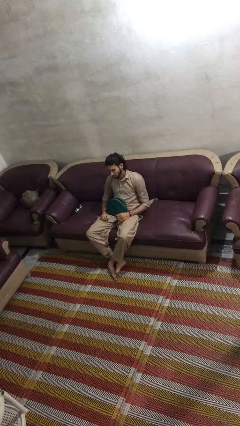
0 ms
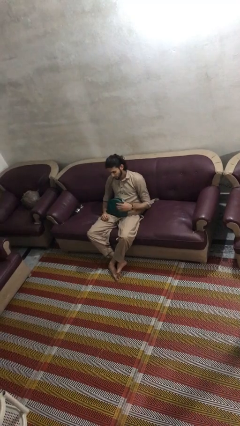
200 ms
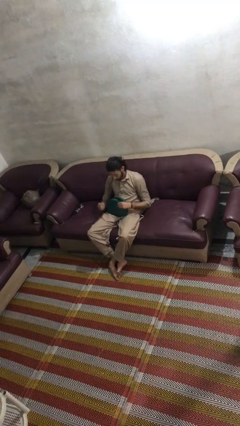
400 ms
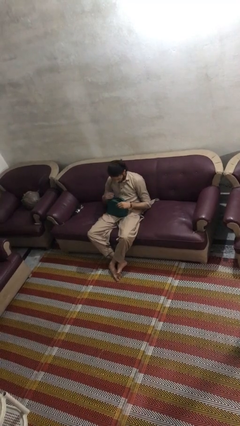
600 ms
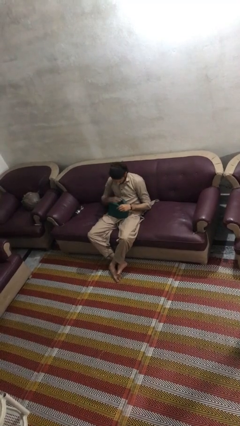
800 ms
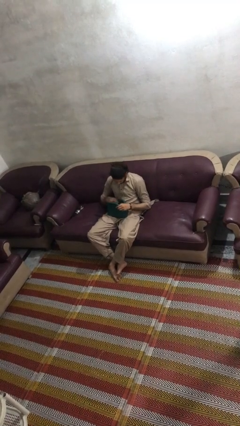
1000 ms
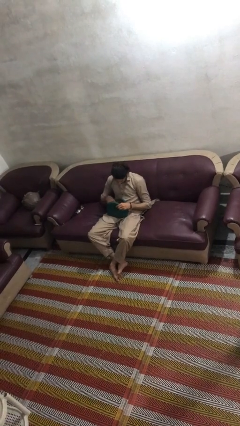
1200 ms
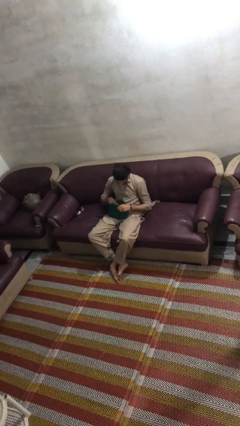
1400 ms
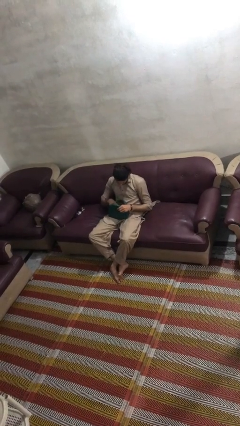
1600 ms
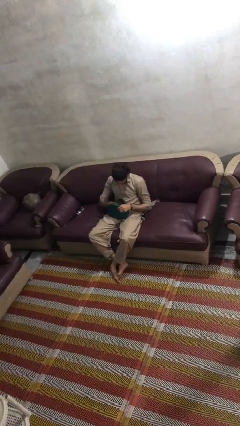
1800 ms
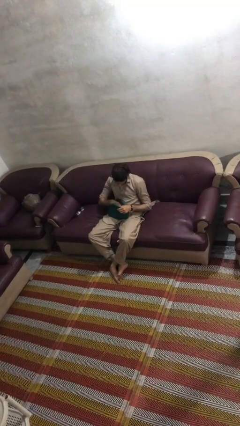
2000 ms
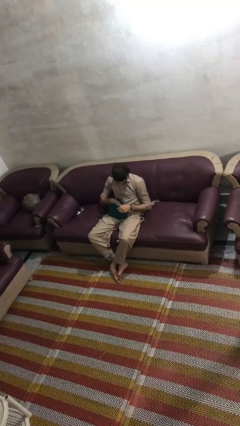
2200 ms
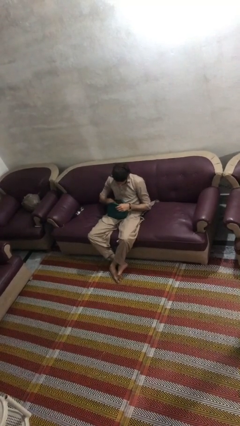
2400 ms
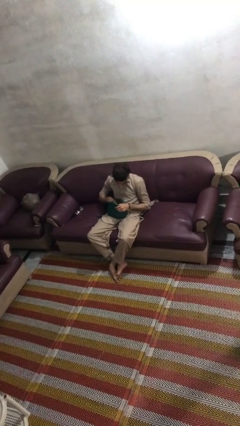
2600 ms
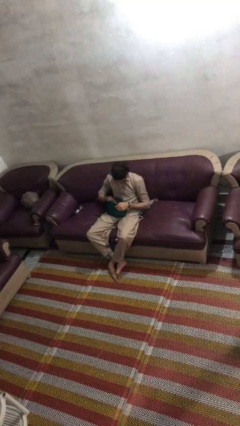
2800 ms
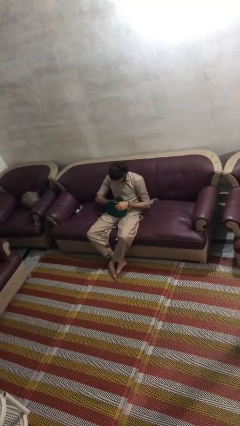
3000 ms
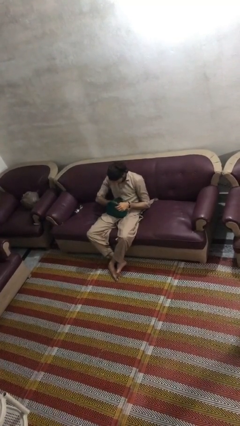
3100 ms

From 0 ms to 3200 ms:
person searches in purse

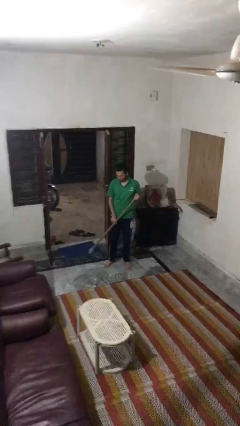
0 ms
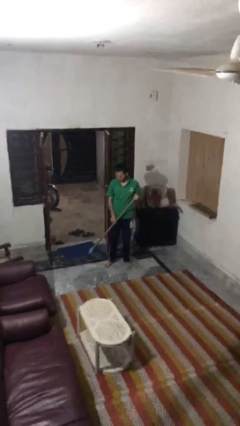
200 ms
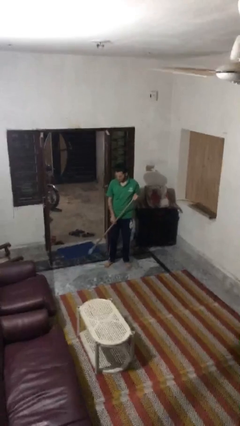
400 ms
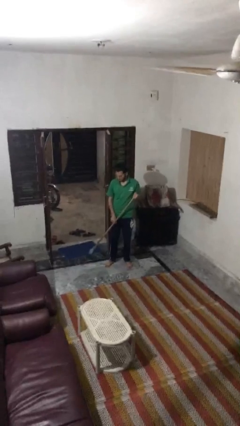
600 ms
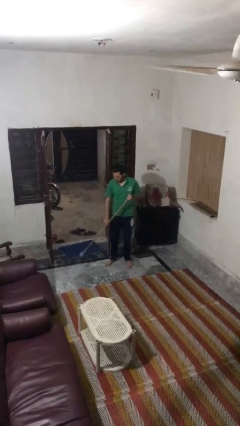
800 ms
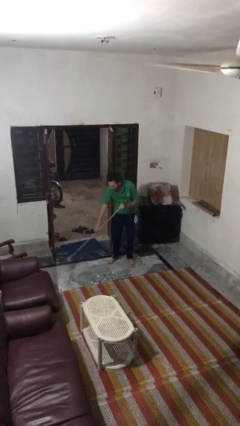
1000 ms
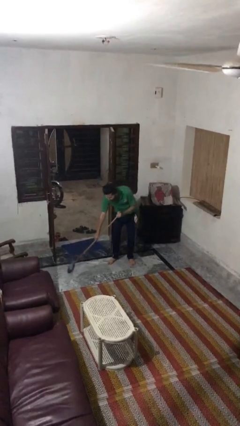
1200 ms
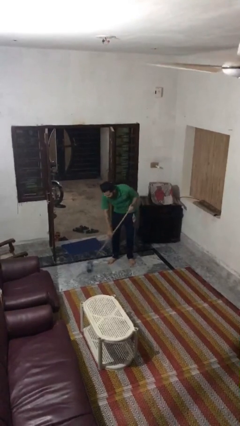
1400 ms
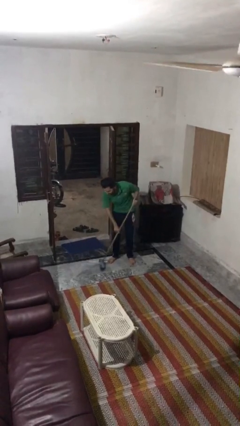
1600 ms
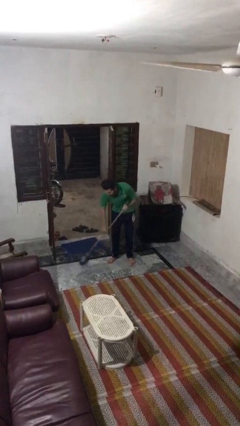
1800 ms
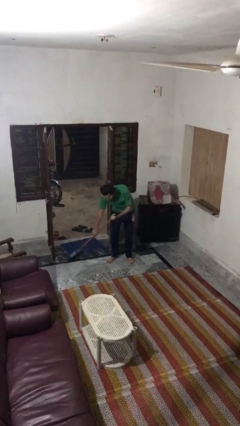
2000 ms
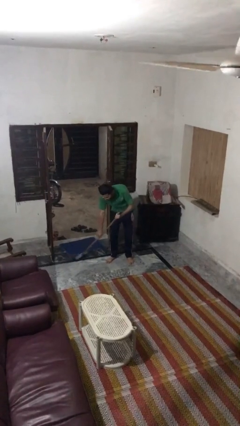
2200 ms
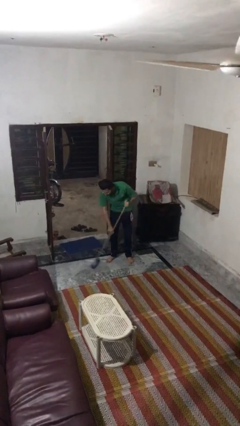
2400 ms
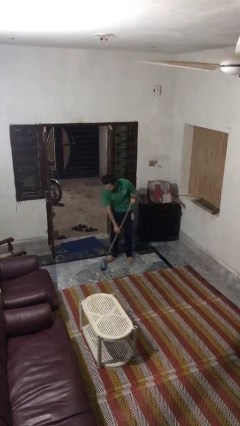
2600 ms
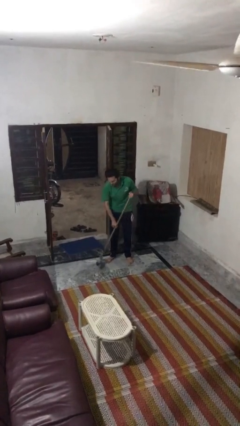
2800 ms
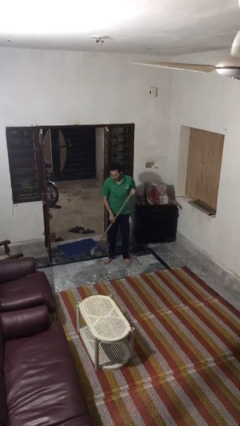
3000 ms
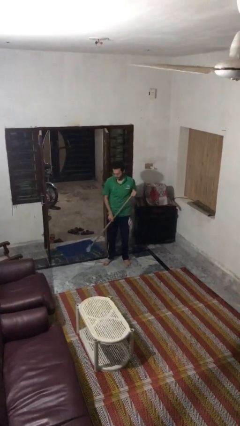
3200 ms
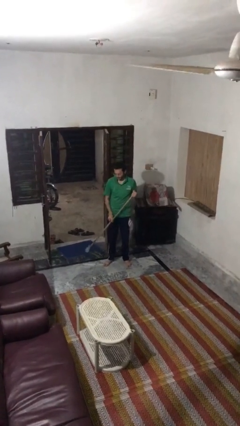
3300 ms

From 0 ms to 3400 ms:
person sweeps floor

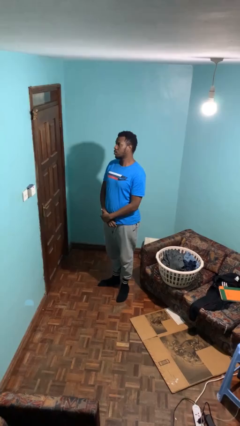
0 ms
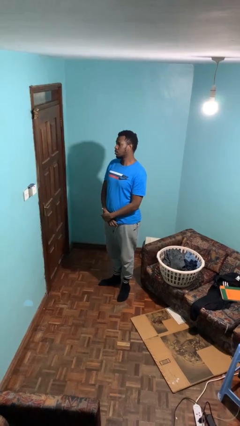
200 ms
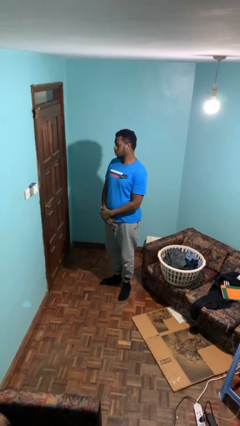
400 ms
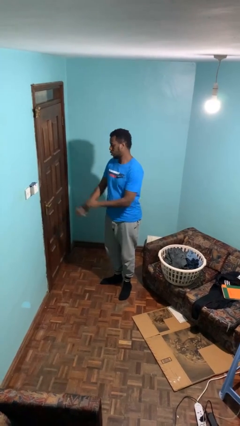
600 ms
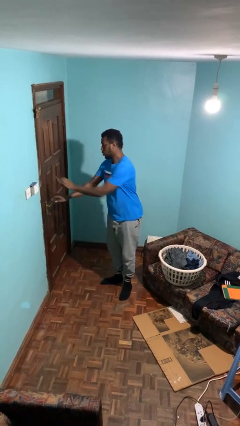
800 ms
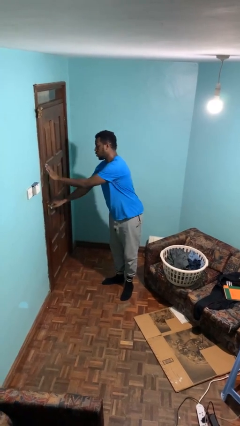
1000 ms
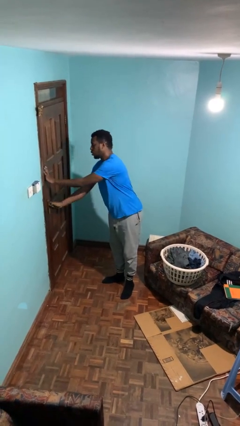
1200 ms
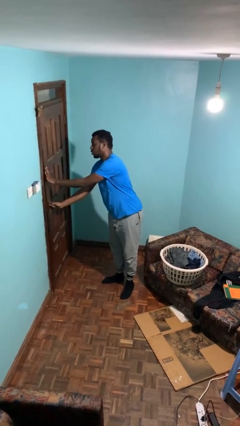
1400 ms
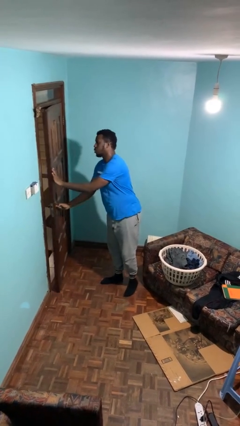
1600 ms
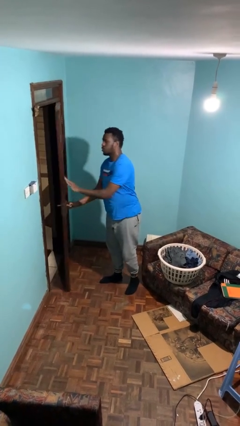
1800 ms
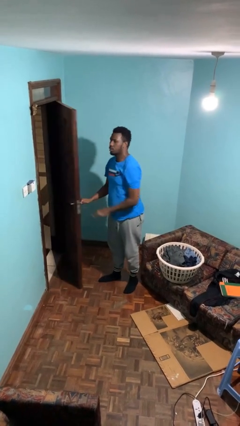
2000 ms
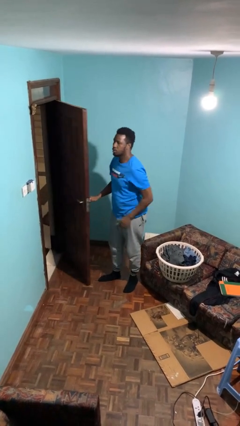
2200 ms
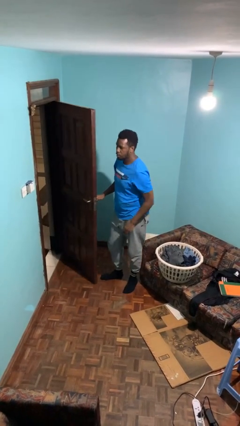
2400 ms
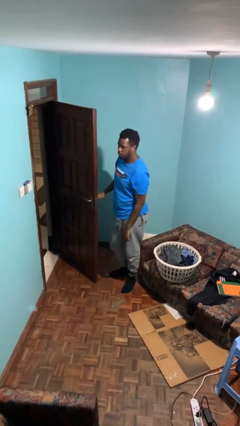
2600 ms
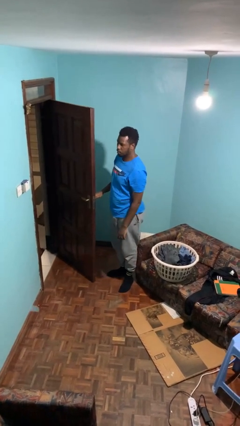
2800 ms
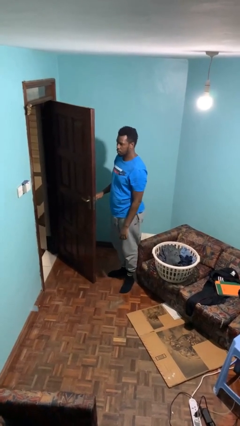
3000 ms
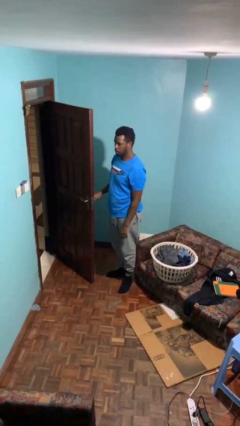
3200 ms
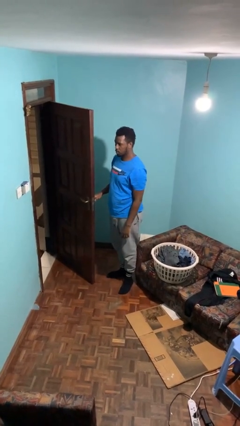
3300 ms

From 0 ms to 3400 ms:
person opens facility door

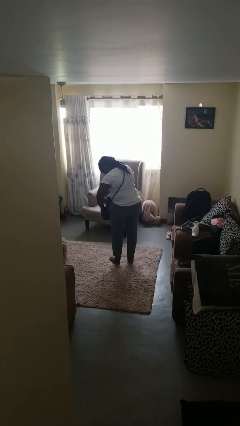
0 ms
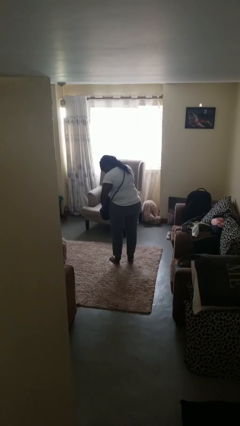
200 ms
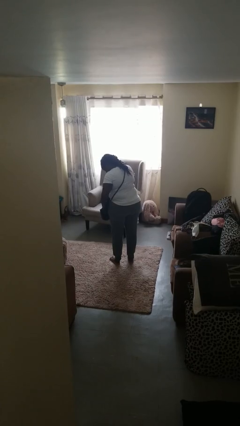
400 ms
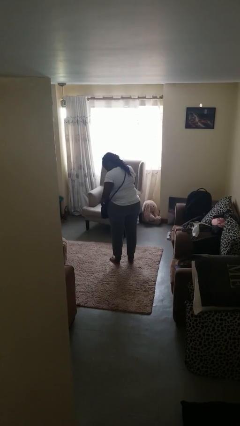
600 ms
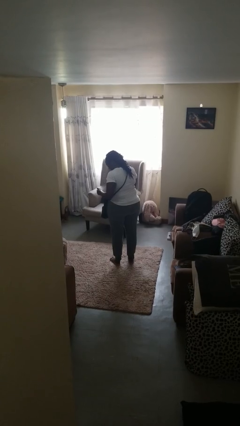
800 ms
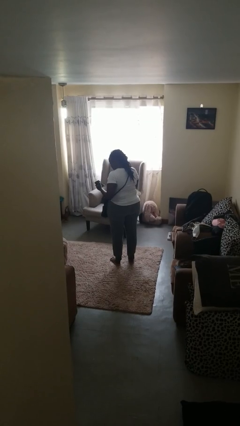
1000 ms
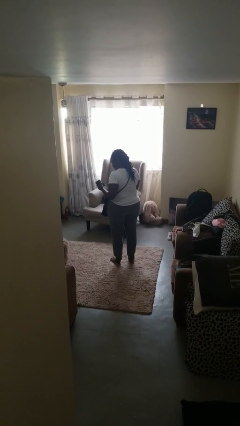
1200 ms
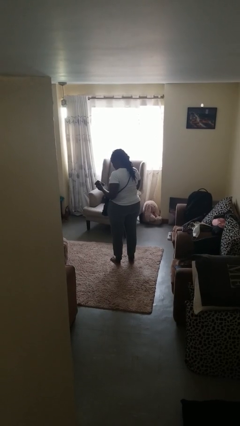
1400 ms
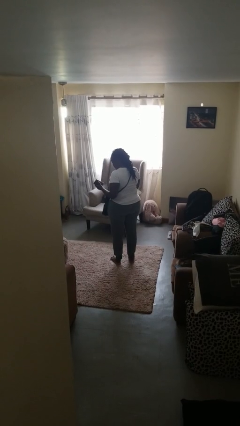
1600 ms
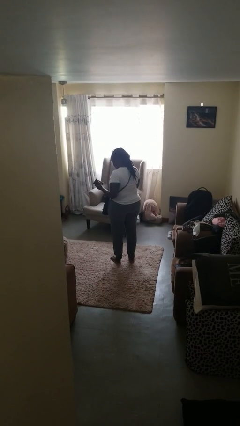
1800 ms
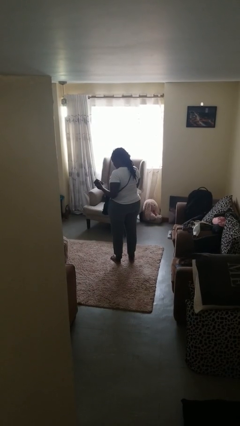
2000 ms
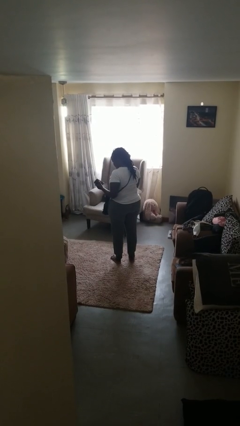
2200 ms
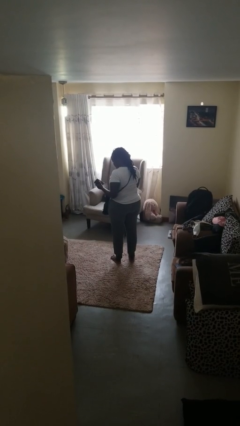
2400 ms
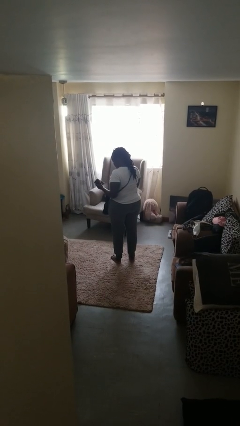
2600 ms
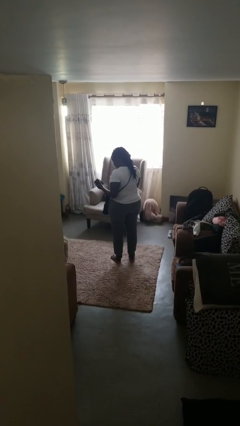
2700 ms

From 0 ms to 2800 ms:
person takes object from purse

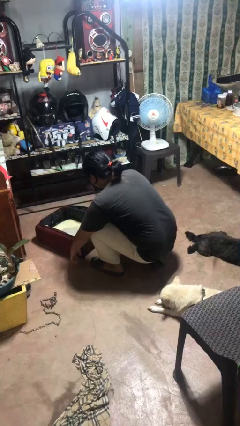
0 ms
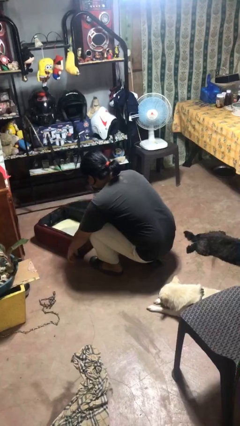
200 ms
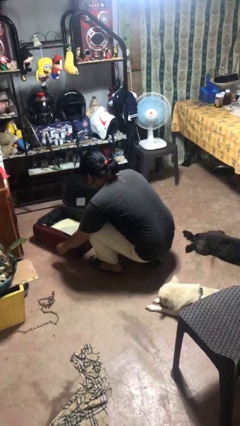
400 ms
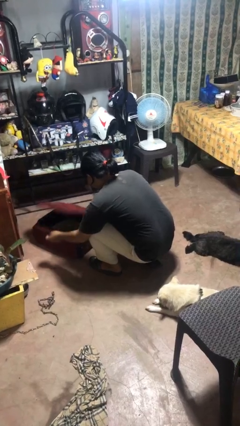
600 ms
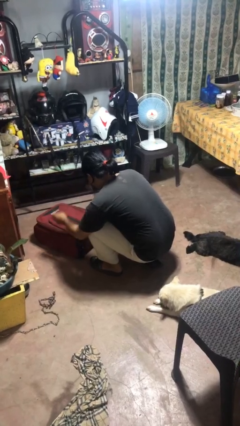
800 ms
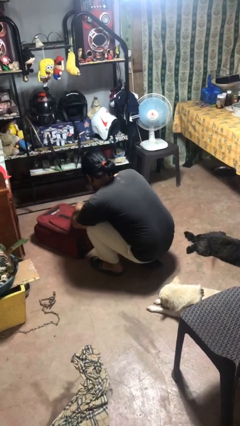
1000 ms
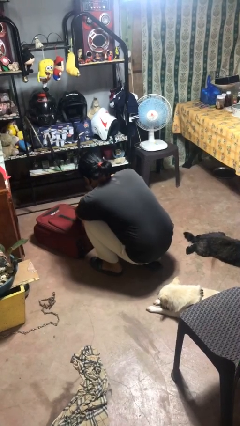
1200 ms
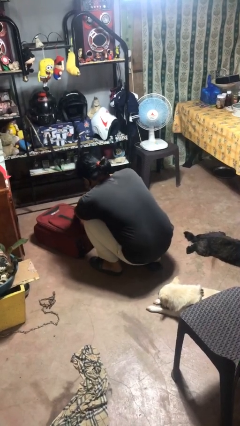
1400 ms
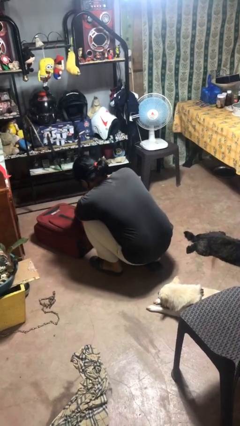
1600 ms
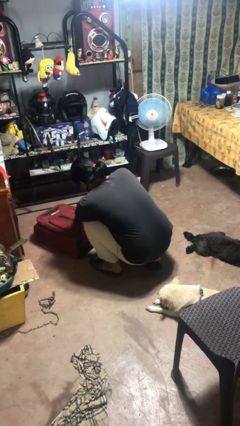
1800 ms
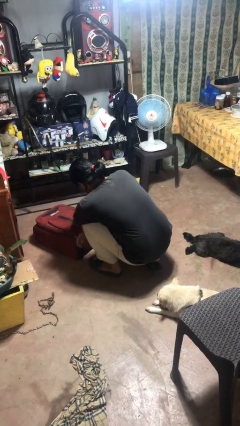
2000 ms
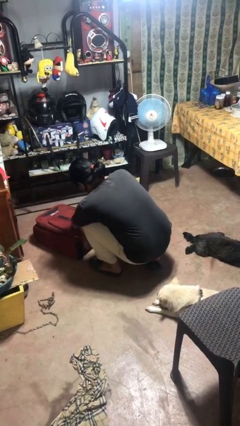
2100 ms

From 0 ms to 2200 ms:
person closes suitcase

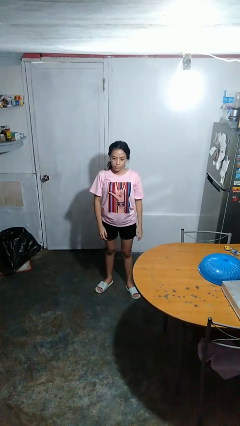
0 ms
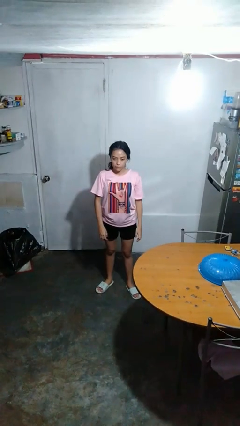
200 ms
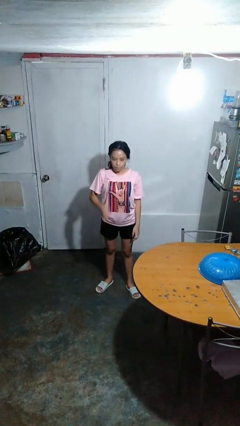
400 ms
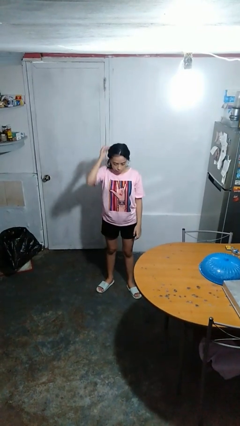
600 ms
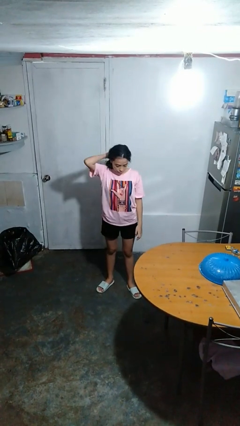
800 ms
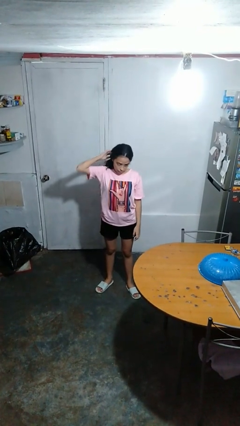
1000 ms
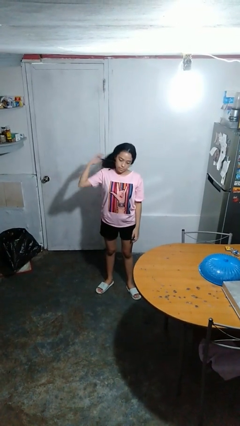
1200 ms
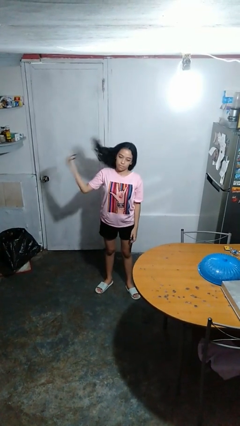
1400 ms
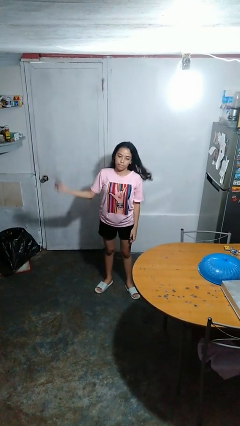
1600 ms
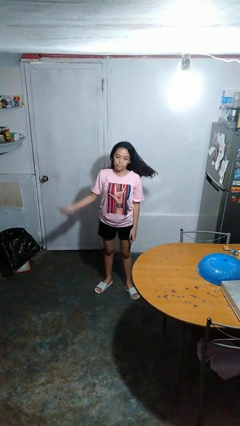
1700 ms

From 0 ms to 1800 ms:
person takes off hairtie

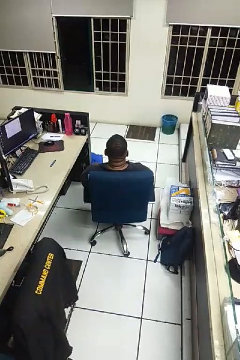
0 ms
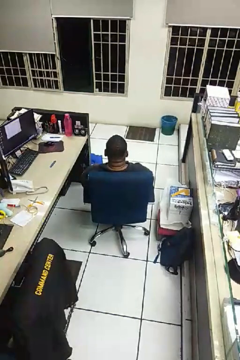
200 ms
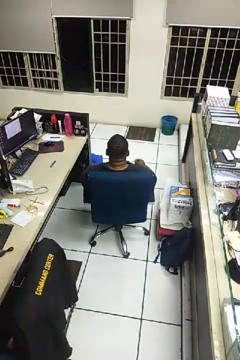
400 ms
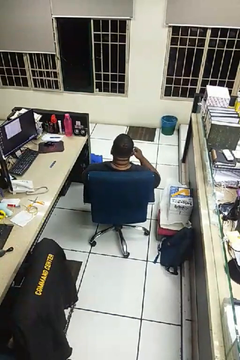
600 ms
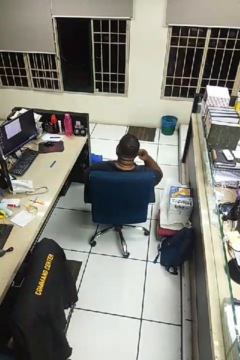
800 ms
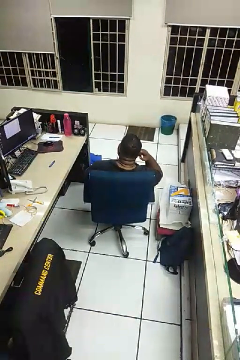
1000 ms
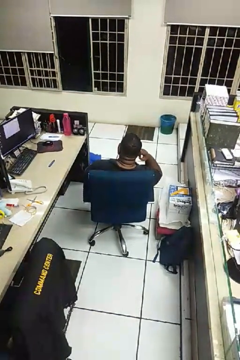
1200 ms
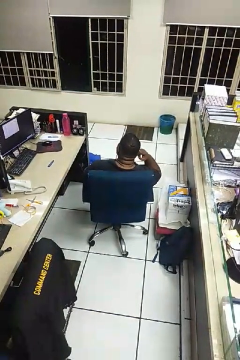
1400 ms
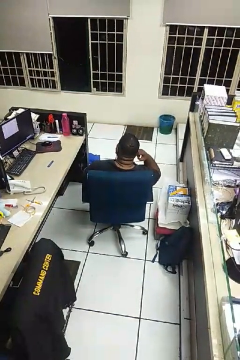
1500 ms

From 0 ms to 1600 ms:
person gestures listen closely
